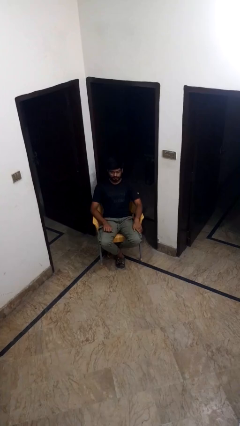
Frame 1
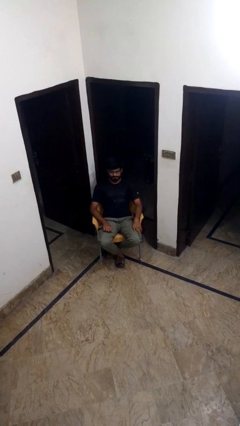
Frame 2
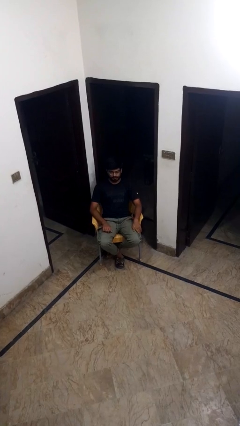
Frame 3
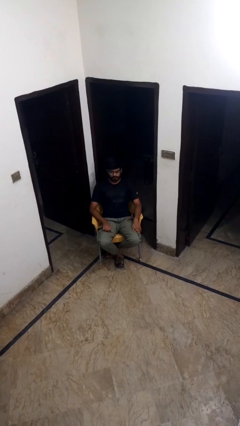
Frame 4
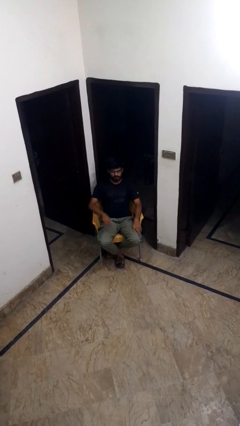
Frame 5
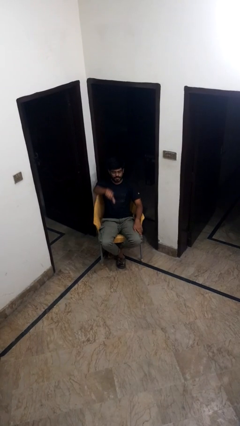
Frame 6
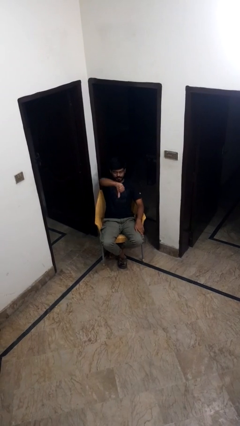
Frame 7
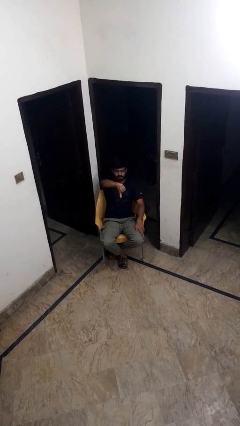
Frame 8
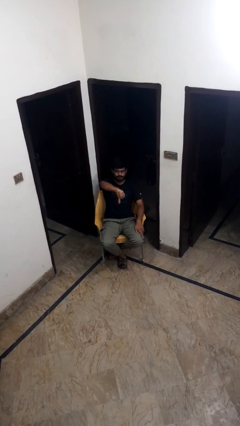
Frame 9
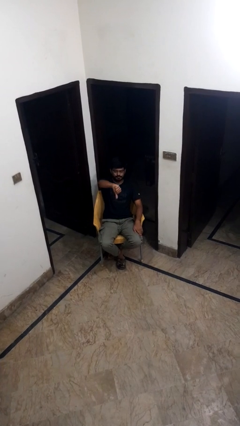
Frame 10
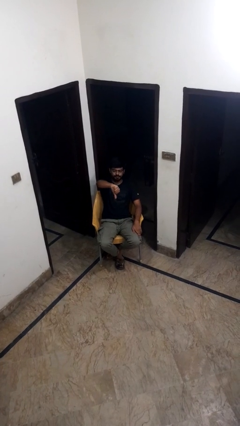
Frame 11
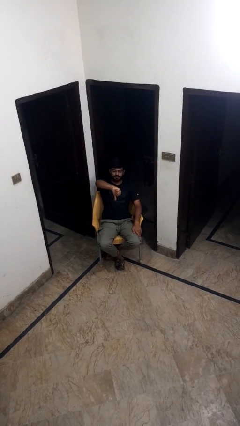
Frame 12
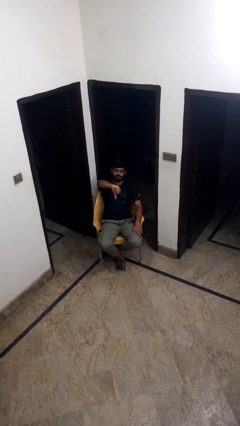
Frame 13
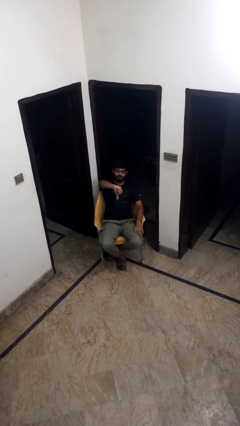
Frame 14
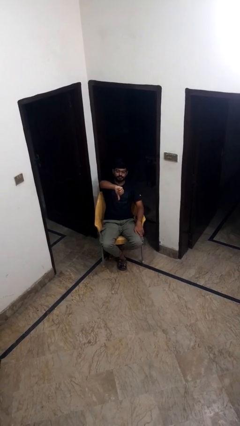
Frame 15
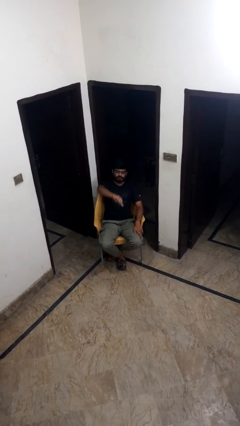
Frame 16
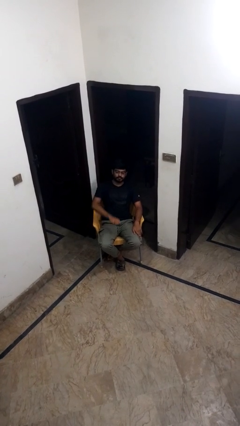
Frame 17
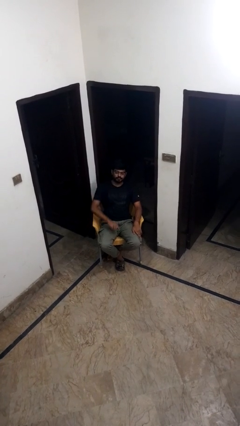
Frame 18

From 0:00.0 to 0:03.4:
person gestures thumbs down

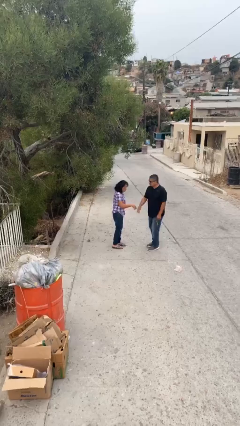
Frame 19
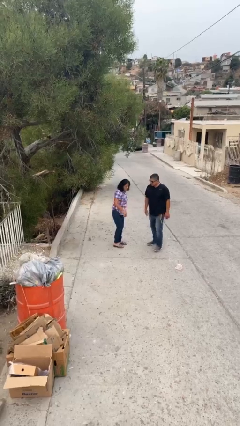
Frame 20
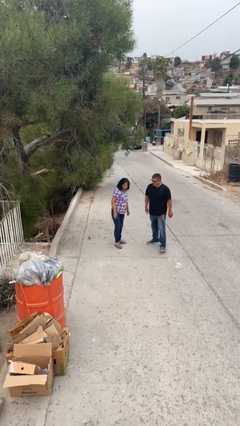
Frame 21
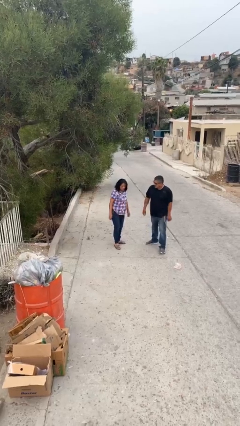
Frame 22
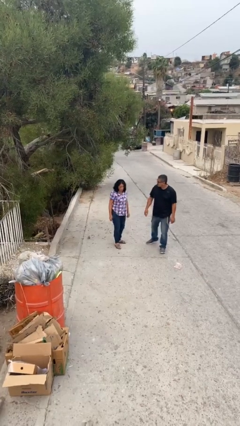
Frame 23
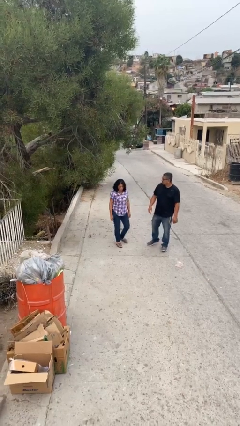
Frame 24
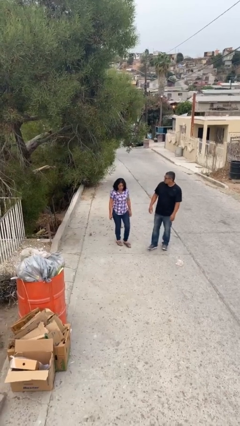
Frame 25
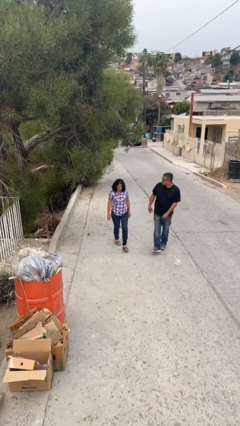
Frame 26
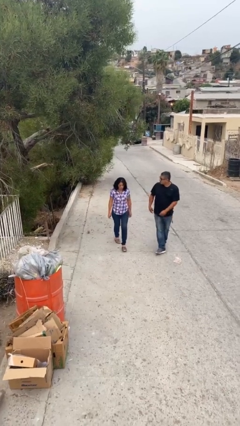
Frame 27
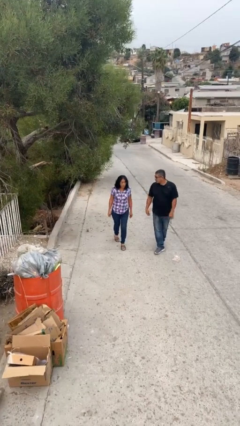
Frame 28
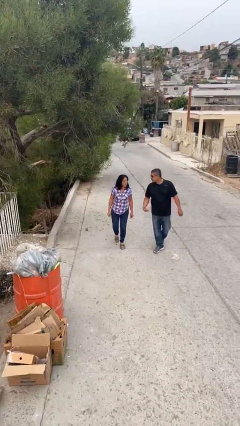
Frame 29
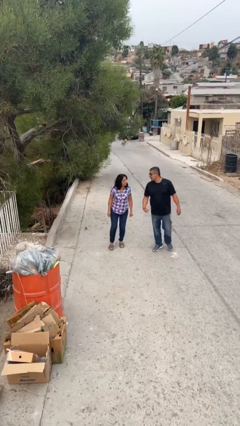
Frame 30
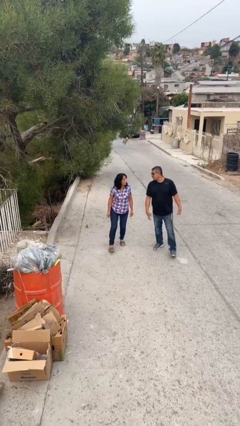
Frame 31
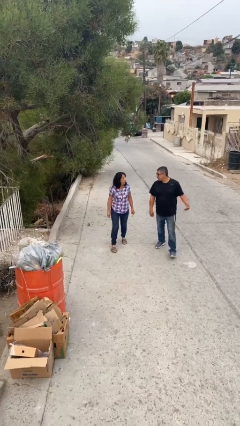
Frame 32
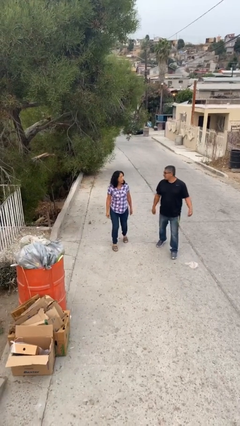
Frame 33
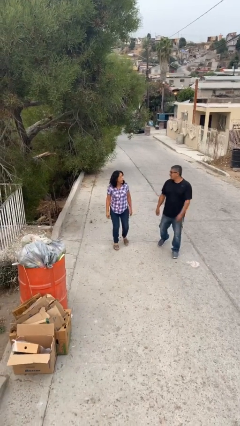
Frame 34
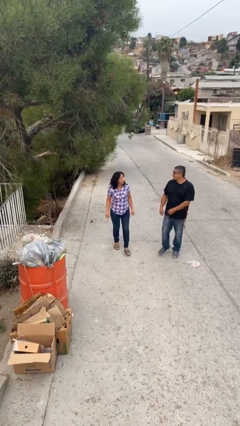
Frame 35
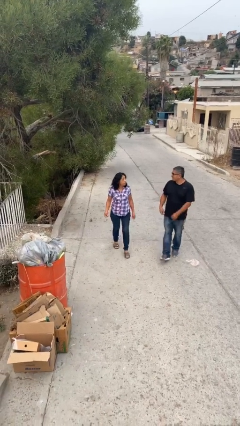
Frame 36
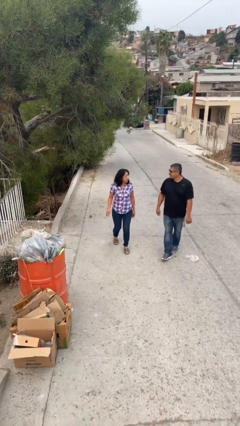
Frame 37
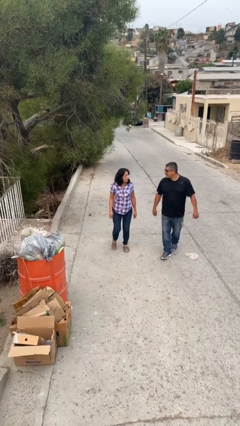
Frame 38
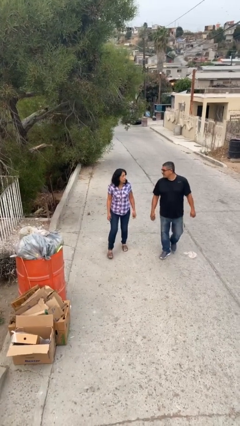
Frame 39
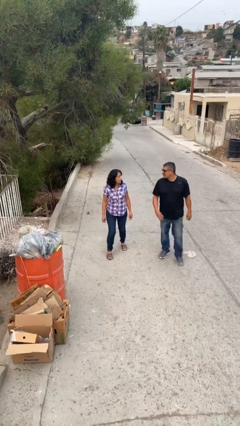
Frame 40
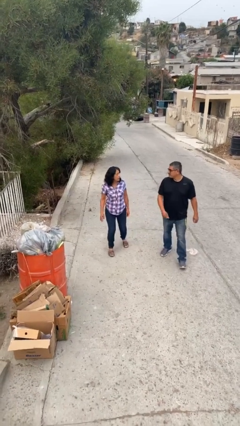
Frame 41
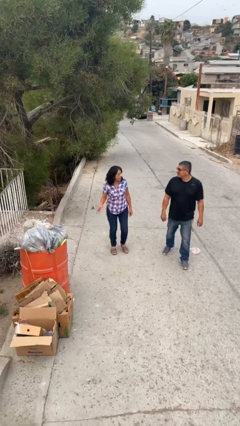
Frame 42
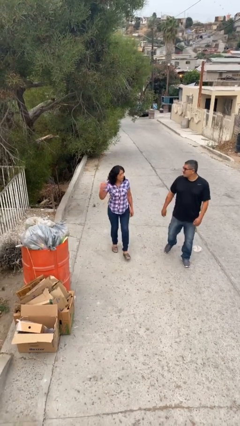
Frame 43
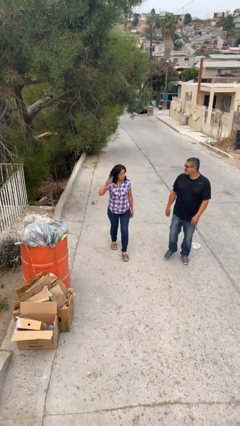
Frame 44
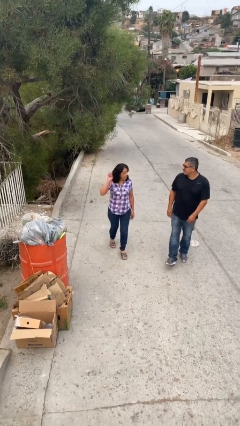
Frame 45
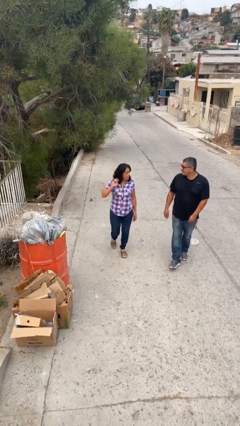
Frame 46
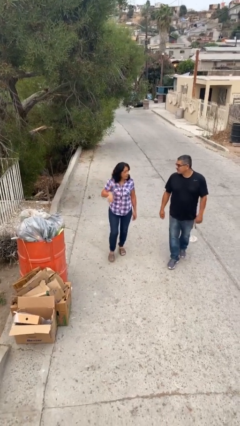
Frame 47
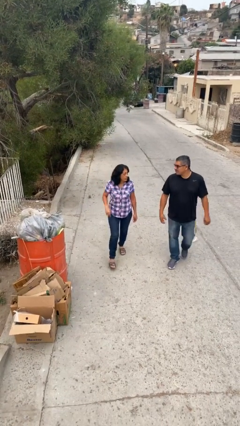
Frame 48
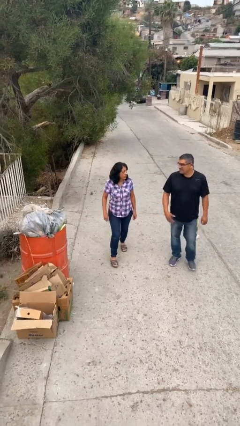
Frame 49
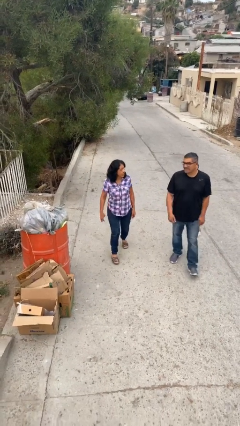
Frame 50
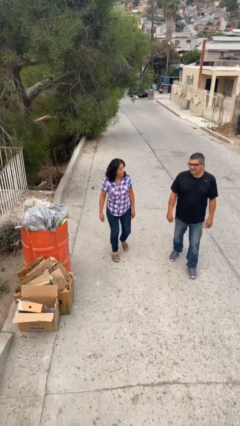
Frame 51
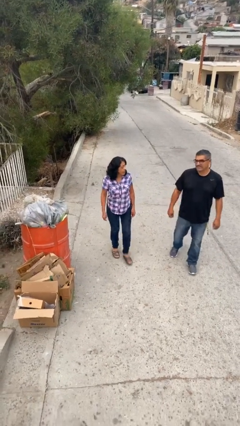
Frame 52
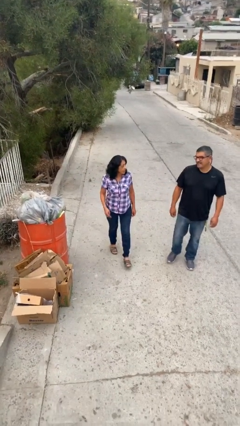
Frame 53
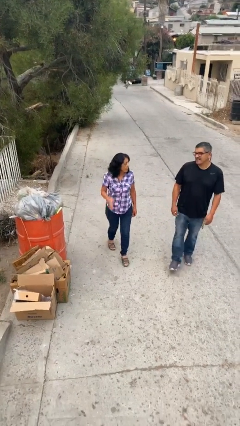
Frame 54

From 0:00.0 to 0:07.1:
person talks to person

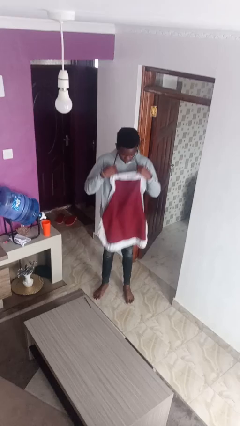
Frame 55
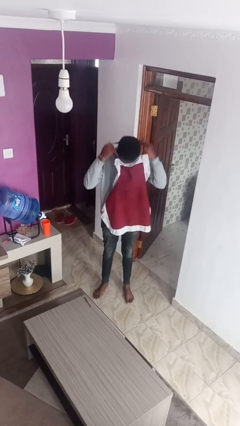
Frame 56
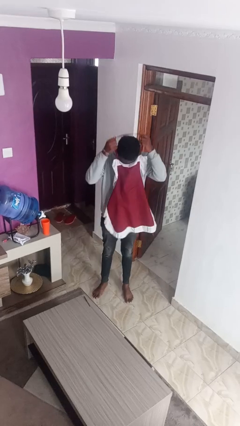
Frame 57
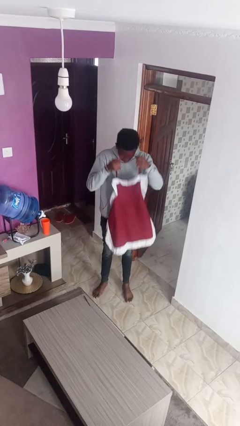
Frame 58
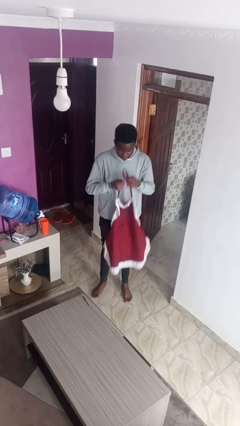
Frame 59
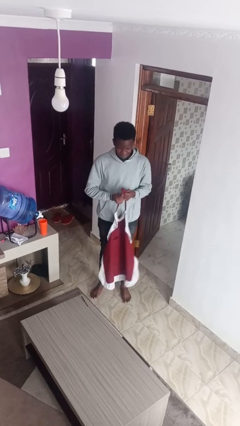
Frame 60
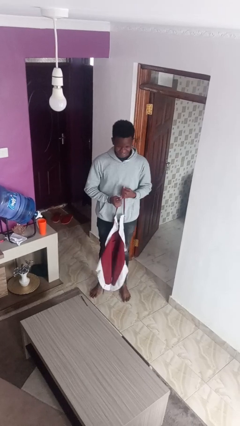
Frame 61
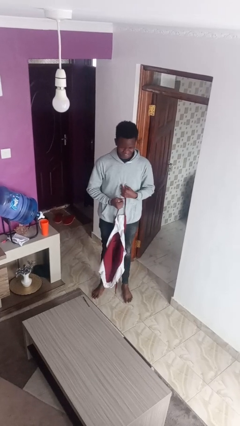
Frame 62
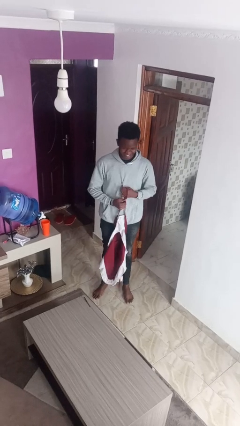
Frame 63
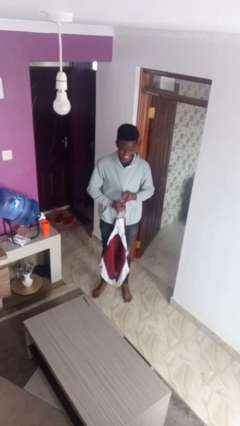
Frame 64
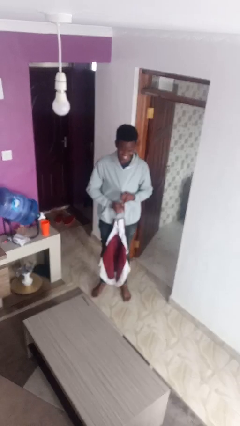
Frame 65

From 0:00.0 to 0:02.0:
person takes off apron

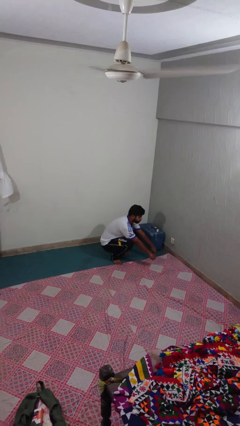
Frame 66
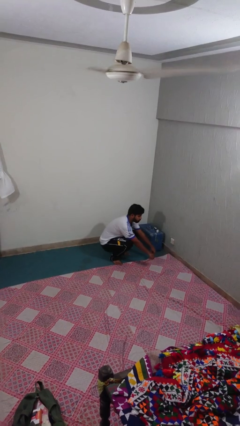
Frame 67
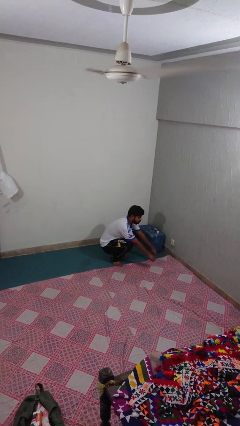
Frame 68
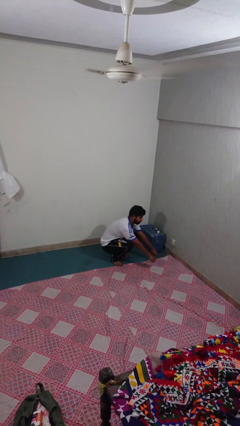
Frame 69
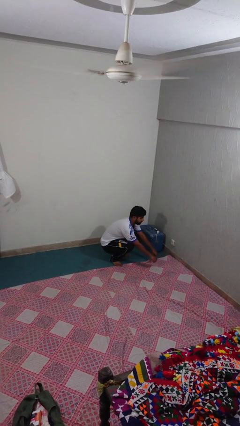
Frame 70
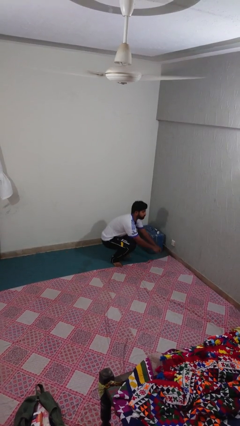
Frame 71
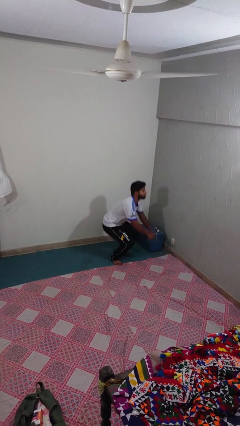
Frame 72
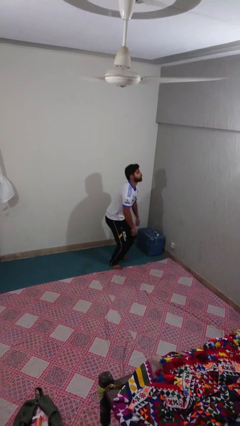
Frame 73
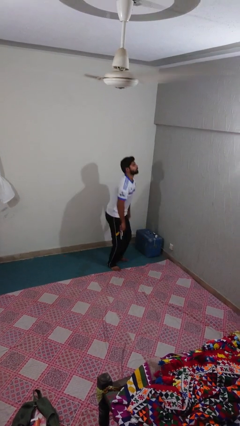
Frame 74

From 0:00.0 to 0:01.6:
person stands up

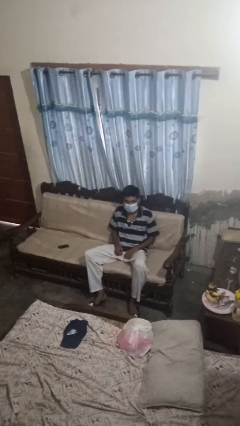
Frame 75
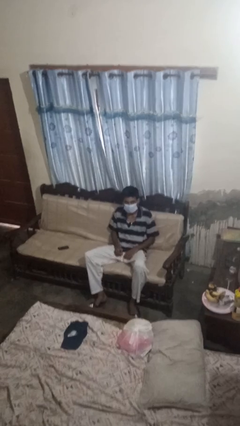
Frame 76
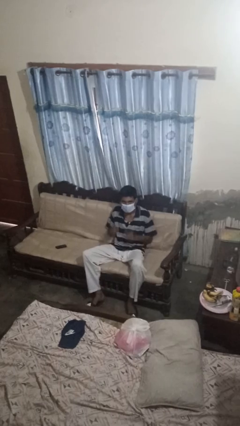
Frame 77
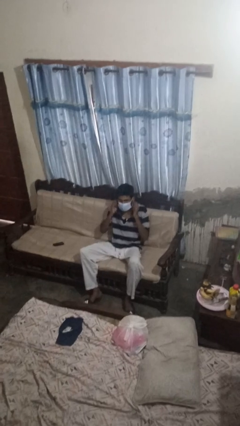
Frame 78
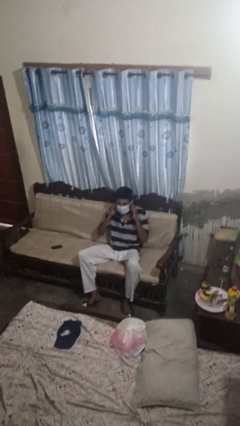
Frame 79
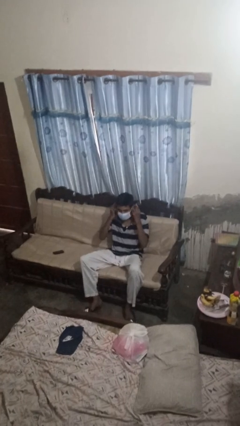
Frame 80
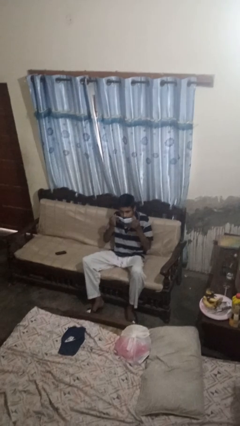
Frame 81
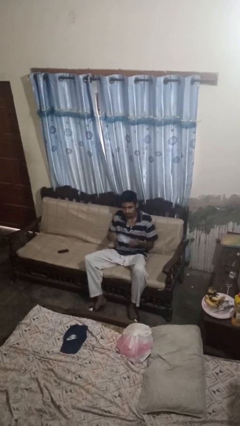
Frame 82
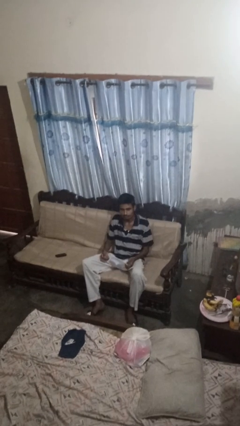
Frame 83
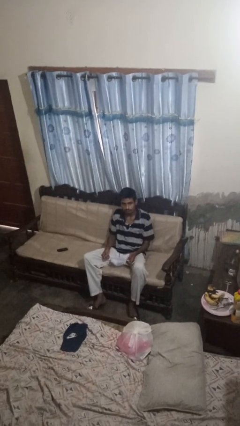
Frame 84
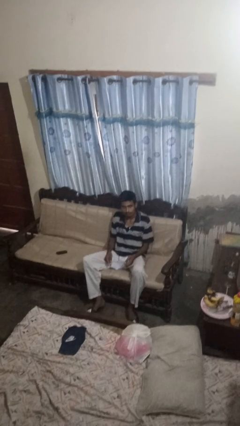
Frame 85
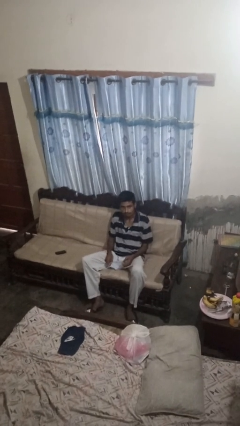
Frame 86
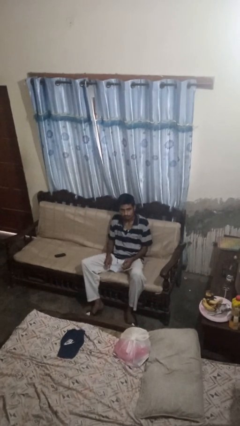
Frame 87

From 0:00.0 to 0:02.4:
person takes off facemask

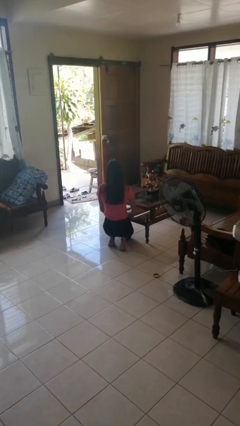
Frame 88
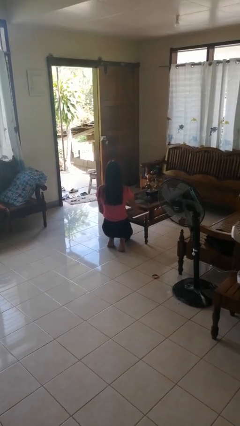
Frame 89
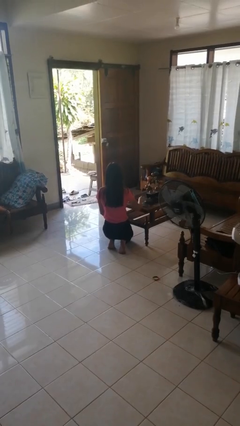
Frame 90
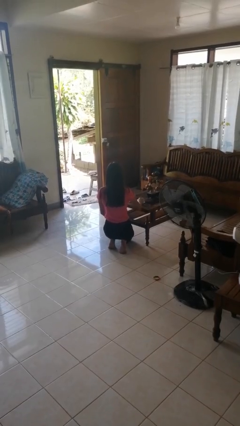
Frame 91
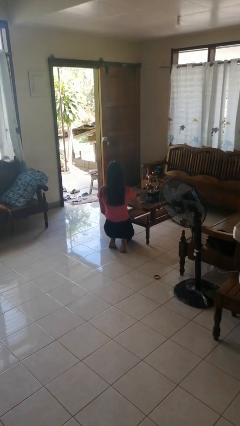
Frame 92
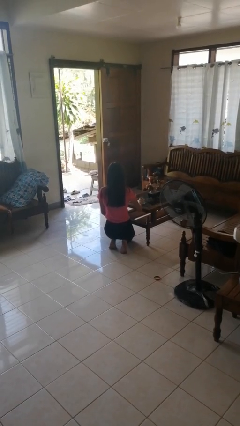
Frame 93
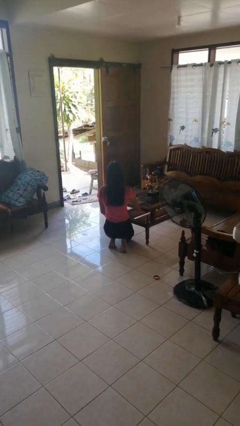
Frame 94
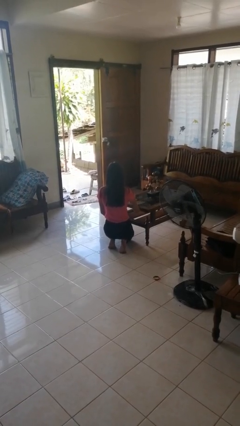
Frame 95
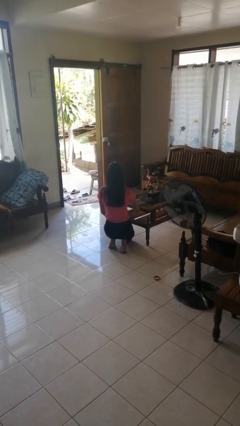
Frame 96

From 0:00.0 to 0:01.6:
person cleans table with rag
